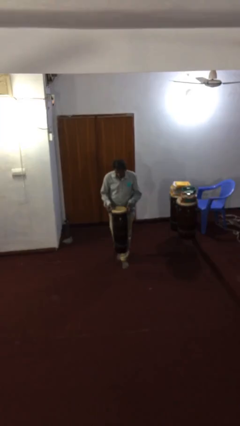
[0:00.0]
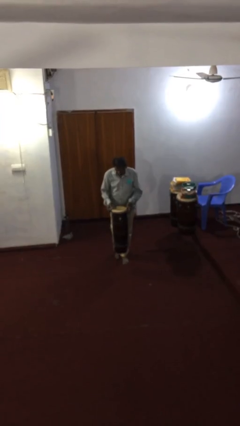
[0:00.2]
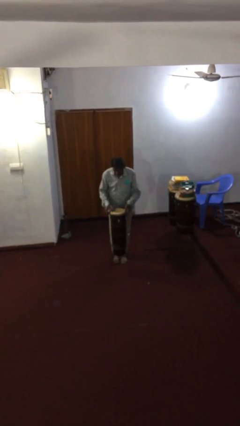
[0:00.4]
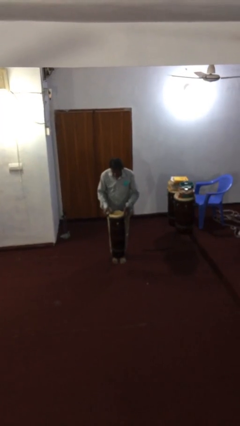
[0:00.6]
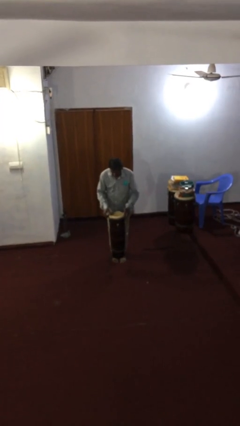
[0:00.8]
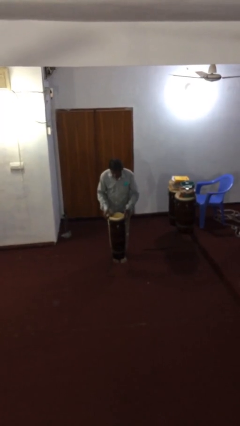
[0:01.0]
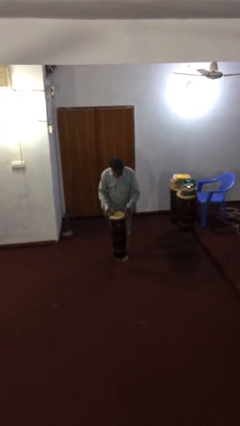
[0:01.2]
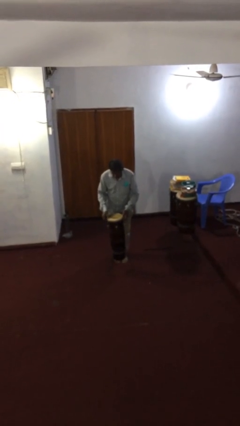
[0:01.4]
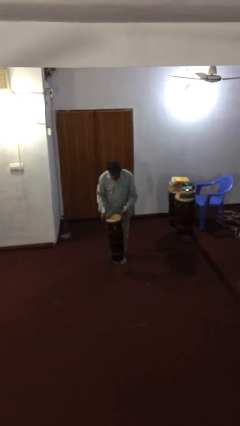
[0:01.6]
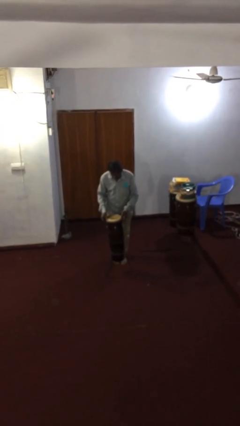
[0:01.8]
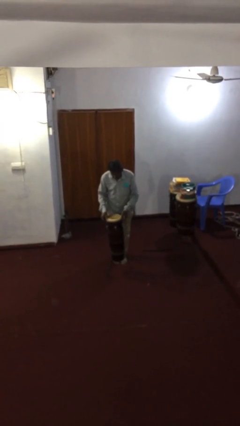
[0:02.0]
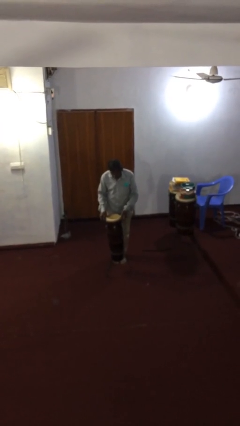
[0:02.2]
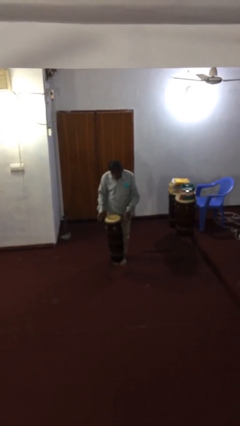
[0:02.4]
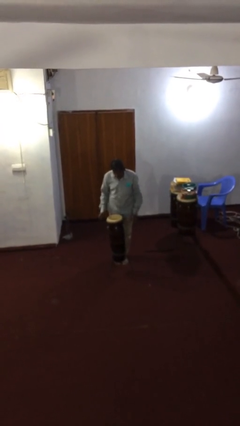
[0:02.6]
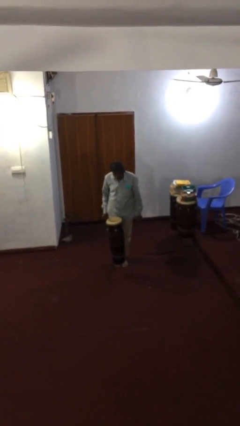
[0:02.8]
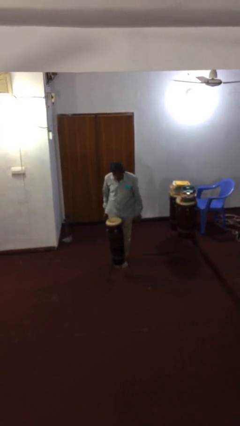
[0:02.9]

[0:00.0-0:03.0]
person puts down object on floor

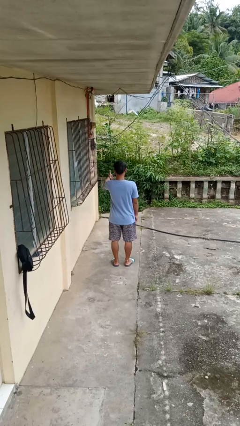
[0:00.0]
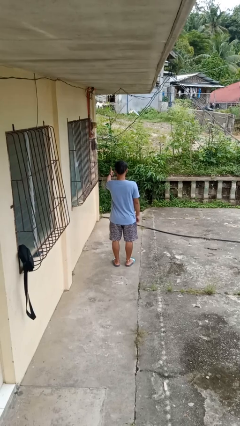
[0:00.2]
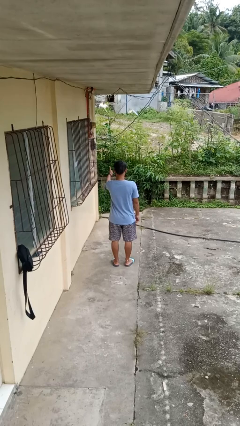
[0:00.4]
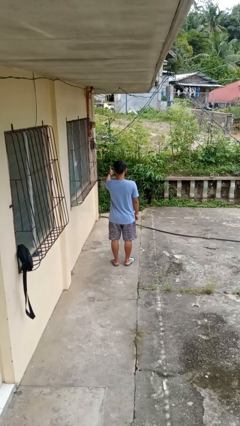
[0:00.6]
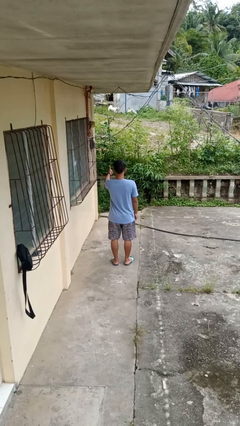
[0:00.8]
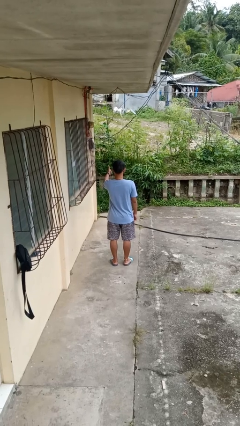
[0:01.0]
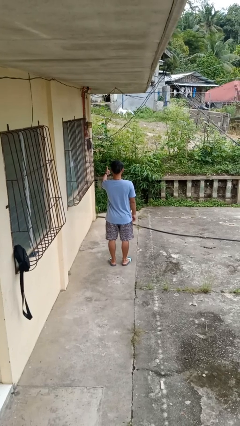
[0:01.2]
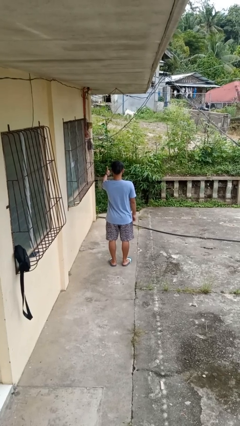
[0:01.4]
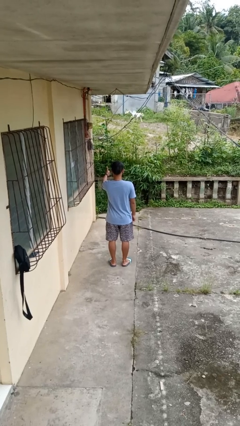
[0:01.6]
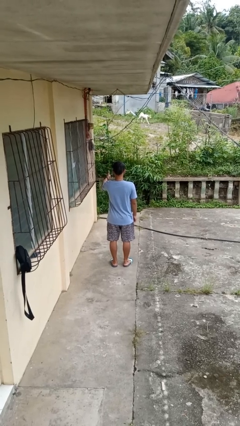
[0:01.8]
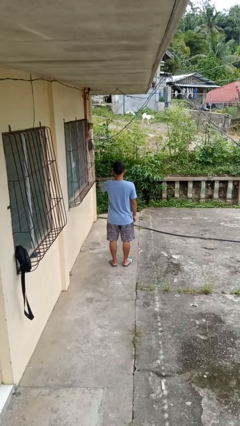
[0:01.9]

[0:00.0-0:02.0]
person gestures thumbs up

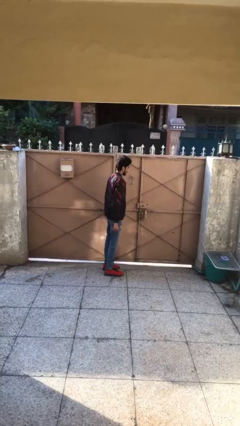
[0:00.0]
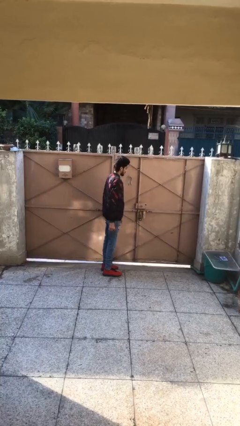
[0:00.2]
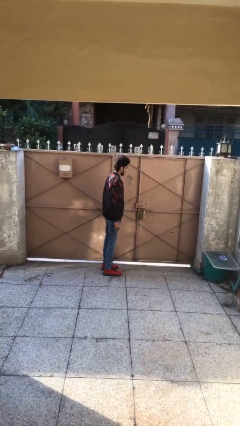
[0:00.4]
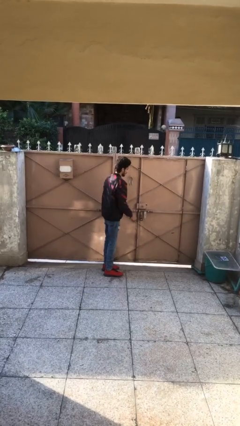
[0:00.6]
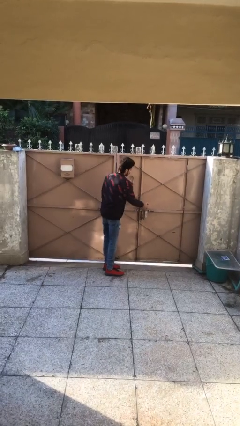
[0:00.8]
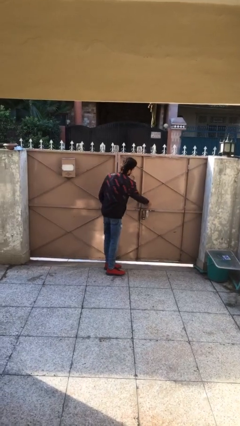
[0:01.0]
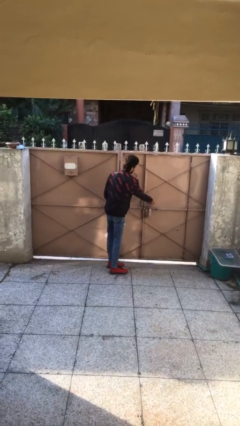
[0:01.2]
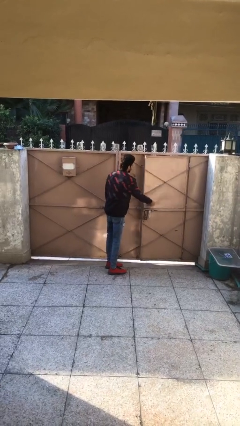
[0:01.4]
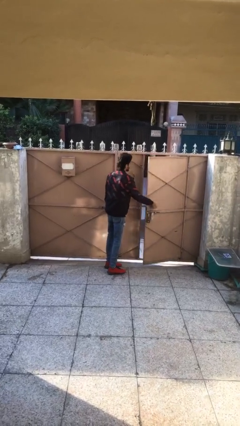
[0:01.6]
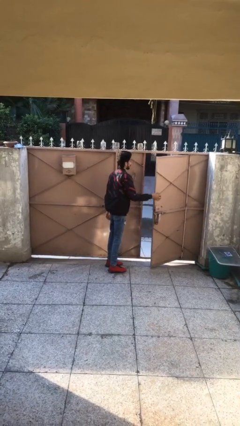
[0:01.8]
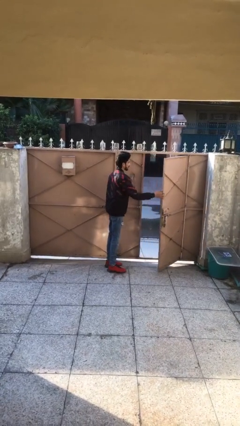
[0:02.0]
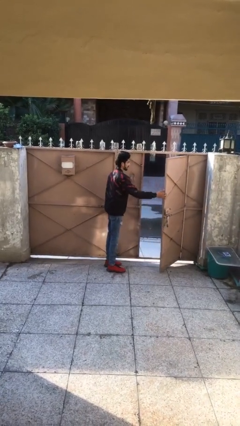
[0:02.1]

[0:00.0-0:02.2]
person opens facility door

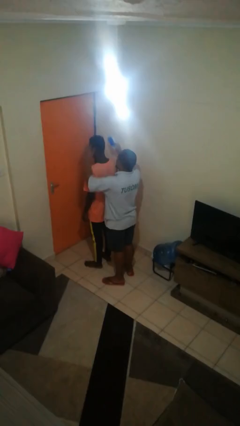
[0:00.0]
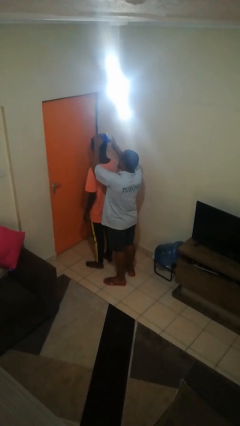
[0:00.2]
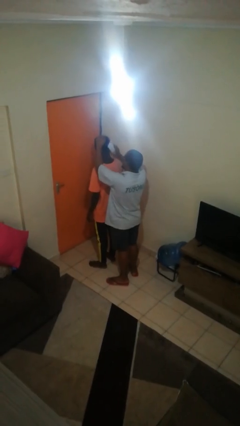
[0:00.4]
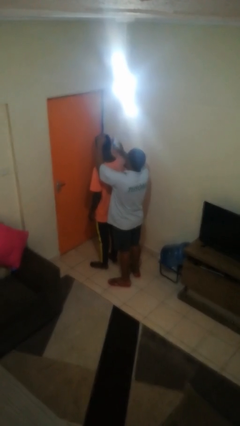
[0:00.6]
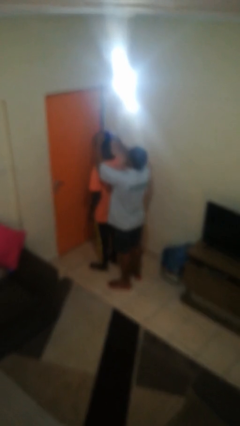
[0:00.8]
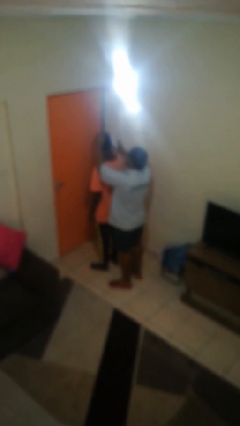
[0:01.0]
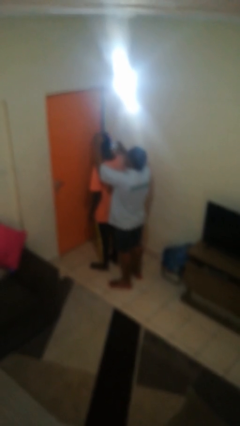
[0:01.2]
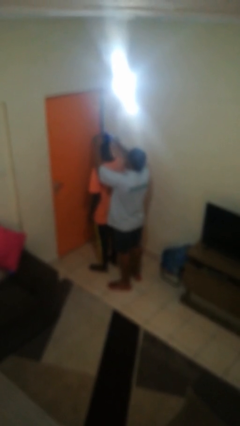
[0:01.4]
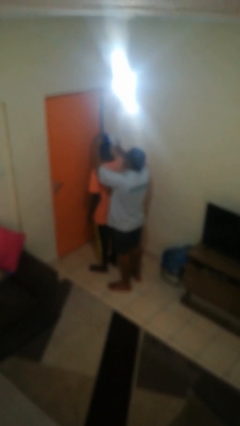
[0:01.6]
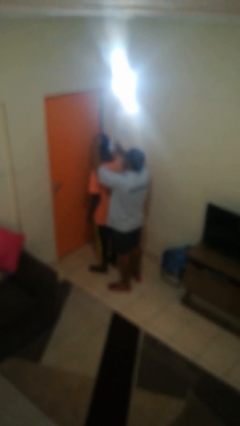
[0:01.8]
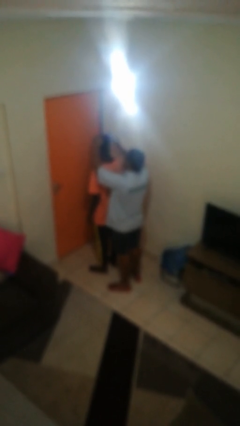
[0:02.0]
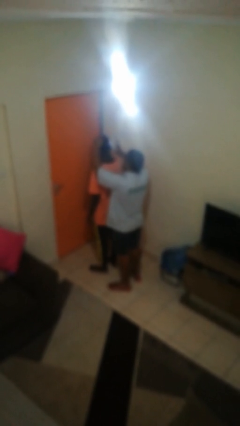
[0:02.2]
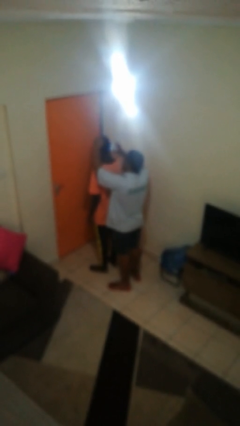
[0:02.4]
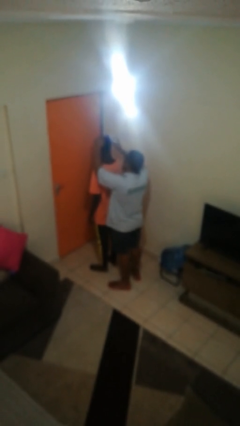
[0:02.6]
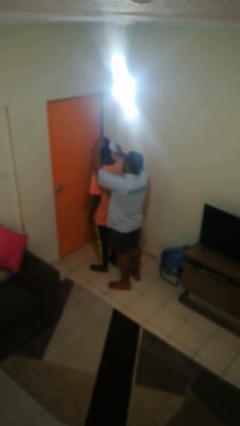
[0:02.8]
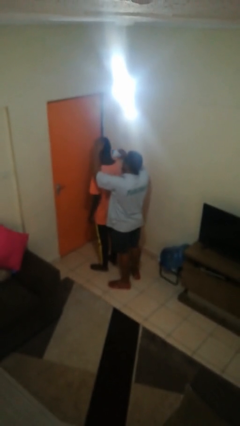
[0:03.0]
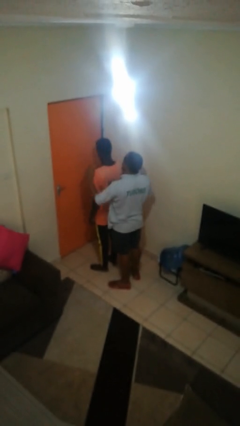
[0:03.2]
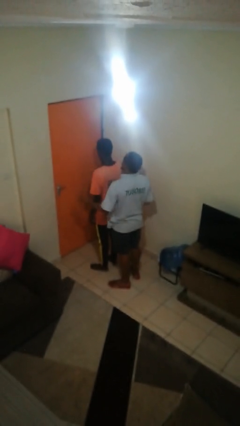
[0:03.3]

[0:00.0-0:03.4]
person brushes hair of person

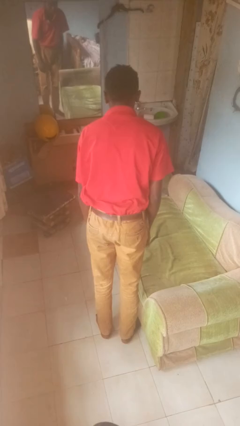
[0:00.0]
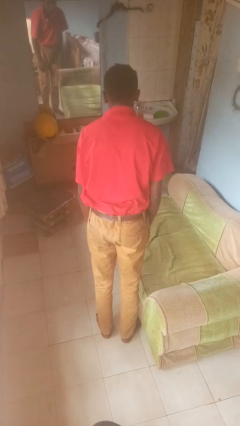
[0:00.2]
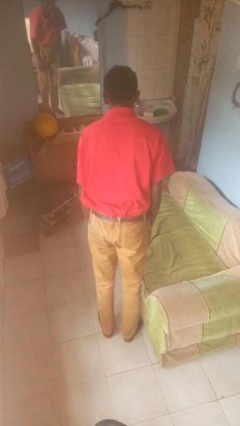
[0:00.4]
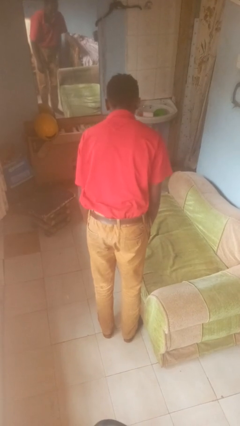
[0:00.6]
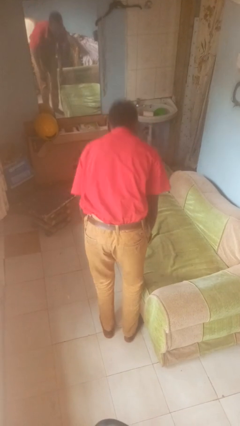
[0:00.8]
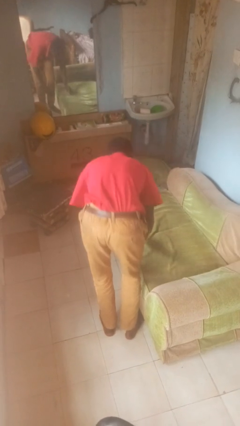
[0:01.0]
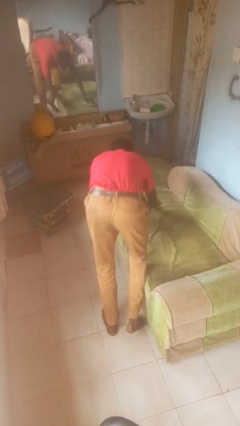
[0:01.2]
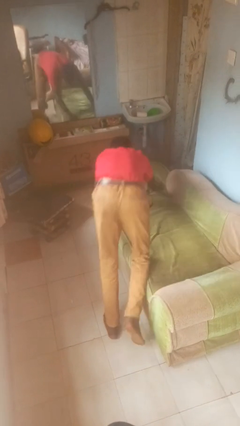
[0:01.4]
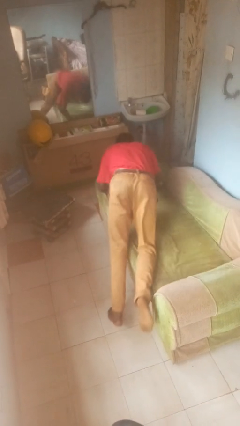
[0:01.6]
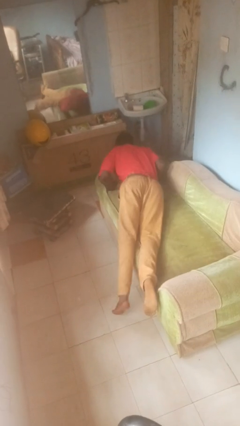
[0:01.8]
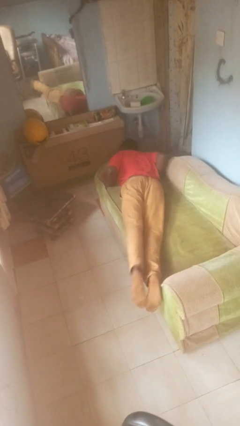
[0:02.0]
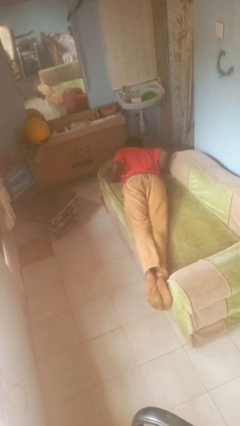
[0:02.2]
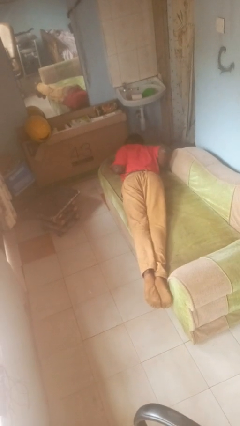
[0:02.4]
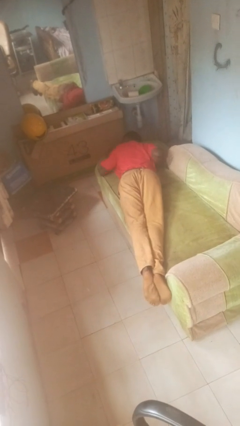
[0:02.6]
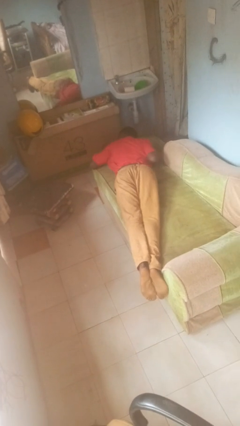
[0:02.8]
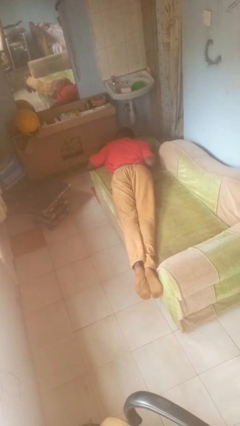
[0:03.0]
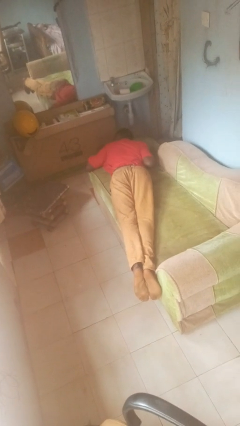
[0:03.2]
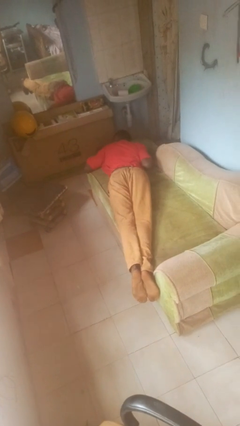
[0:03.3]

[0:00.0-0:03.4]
person lies down on couch

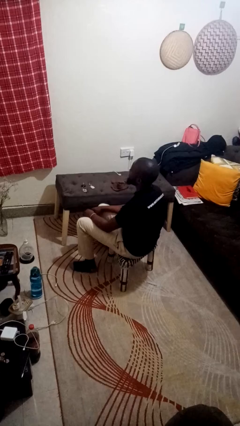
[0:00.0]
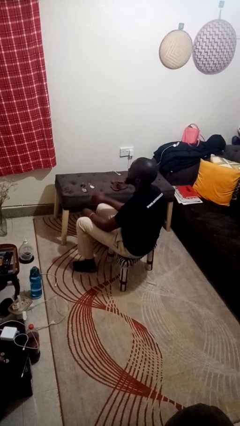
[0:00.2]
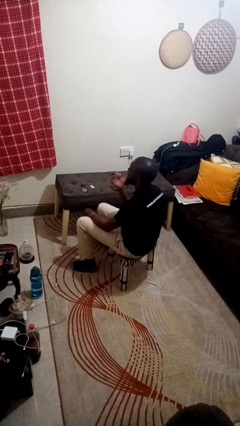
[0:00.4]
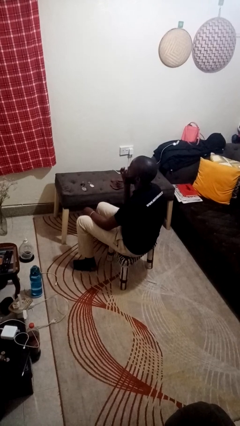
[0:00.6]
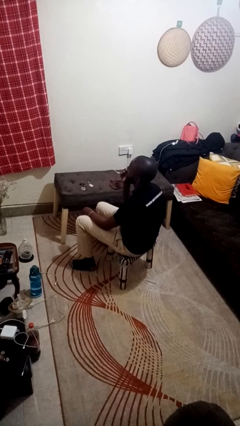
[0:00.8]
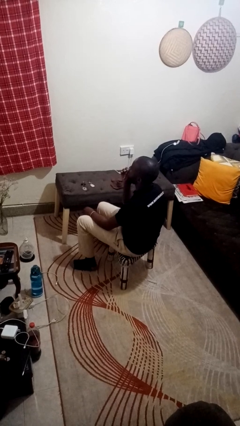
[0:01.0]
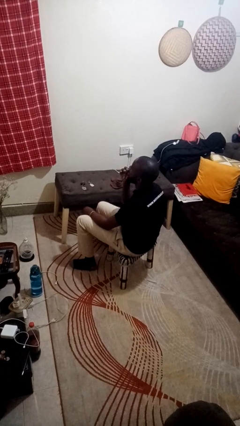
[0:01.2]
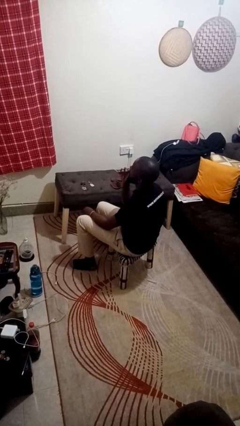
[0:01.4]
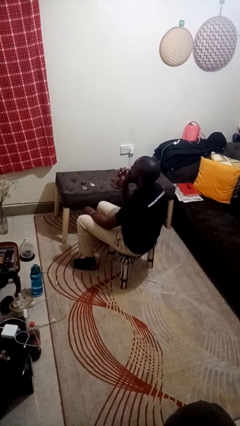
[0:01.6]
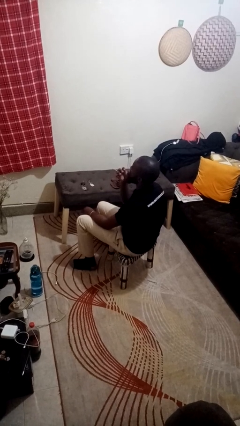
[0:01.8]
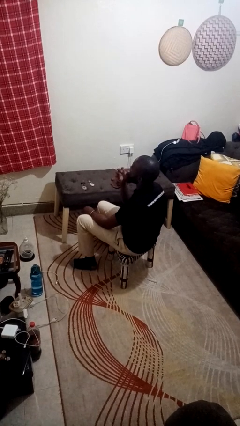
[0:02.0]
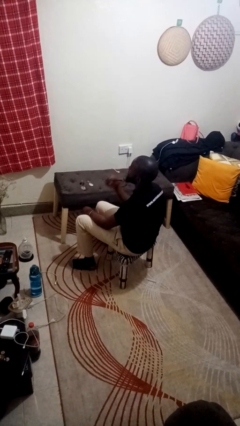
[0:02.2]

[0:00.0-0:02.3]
person licks fingers

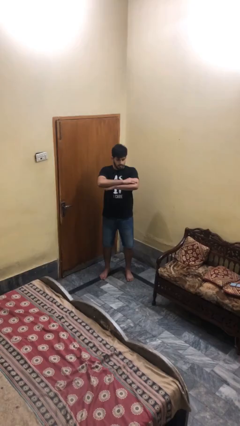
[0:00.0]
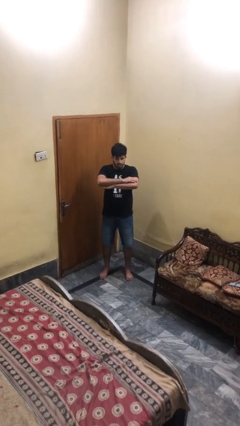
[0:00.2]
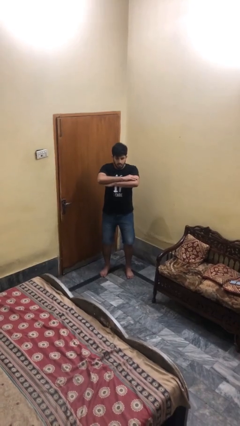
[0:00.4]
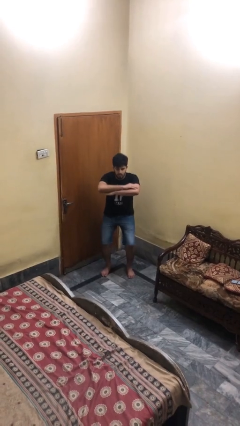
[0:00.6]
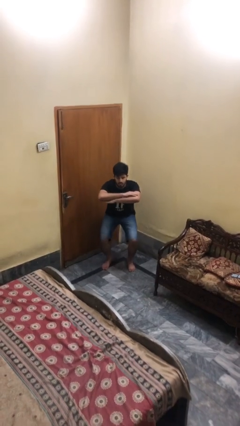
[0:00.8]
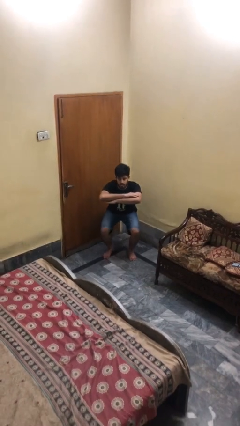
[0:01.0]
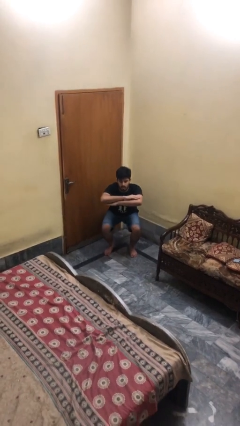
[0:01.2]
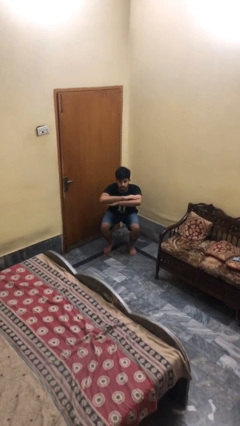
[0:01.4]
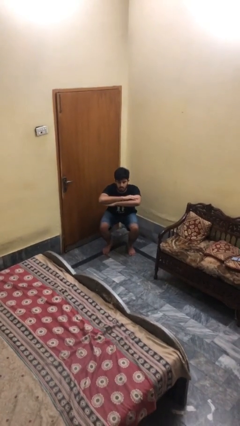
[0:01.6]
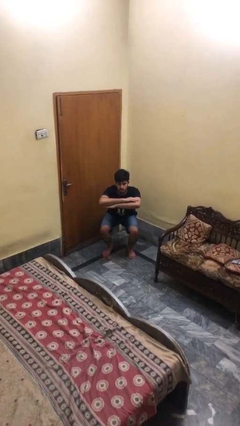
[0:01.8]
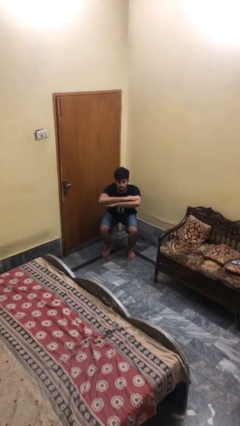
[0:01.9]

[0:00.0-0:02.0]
person squats
